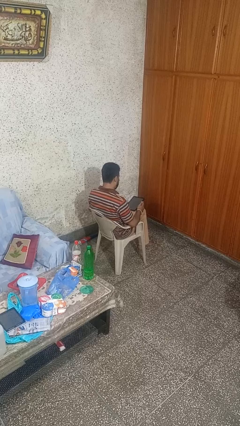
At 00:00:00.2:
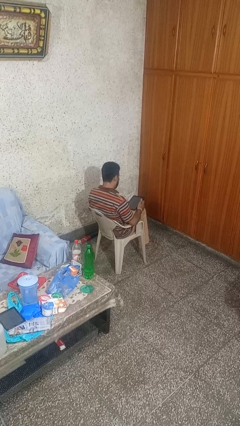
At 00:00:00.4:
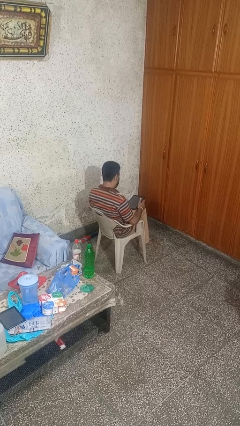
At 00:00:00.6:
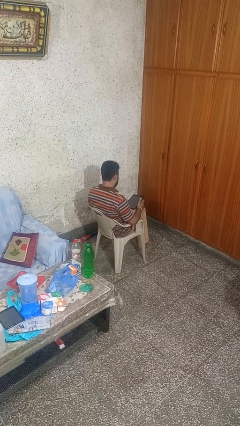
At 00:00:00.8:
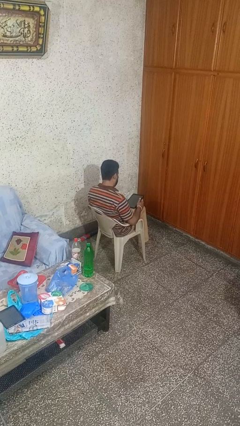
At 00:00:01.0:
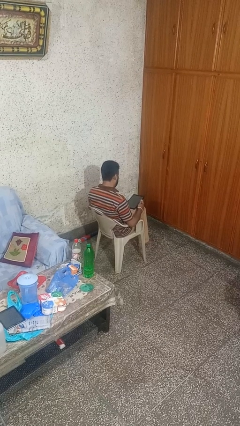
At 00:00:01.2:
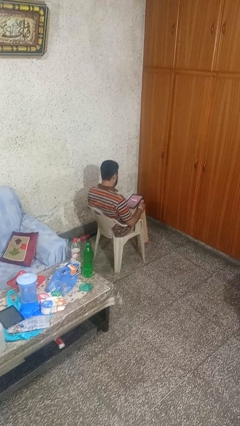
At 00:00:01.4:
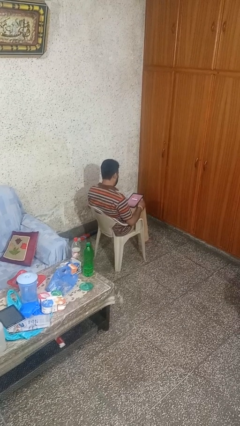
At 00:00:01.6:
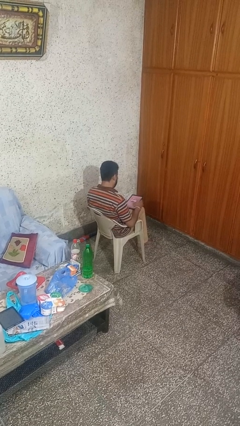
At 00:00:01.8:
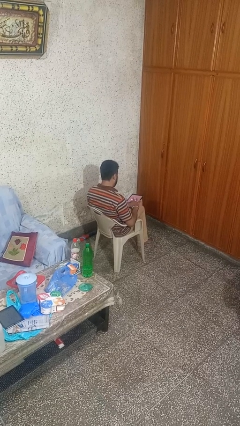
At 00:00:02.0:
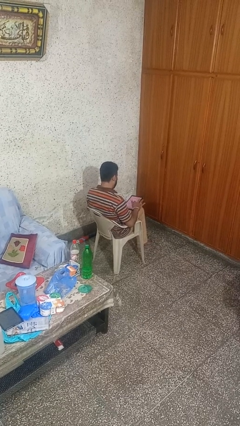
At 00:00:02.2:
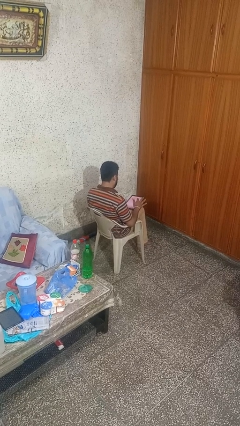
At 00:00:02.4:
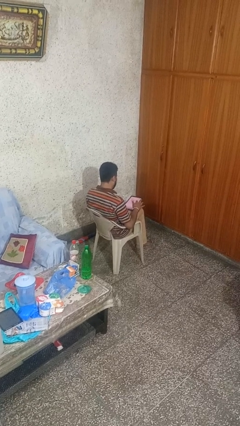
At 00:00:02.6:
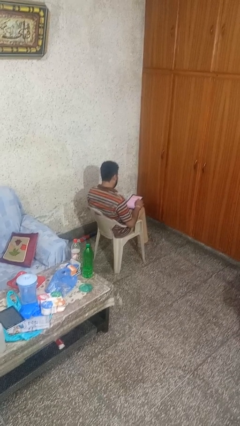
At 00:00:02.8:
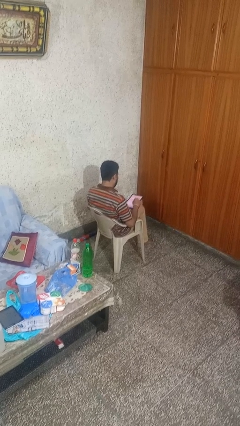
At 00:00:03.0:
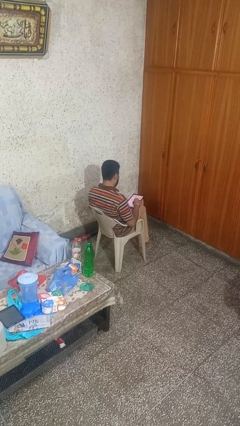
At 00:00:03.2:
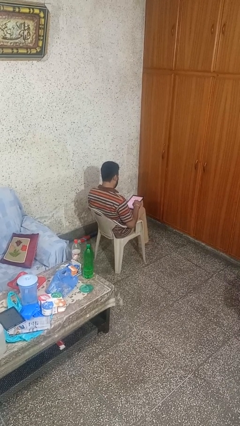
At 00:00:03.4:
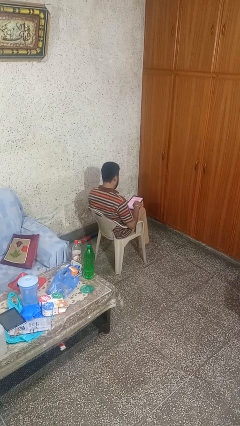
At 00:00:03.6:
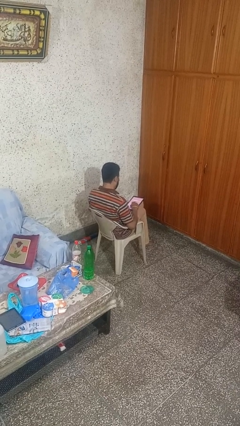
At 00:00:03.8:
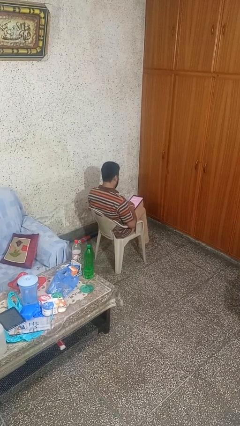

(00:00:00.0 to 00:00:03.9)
person interacts with tablet

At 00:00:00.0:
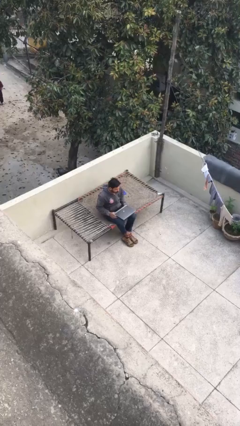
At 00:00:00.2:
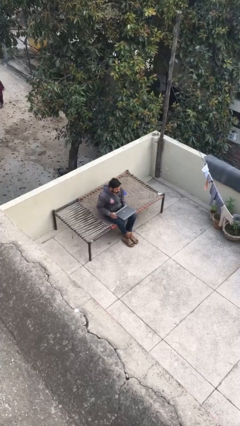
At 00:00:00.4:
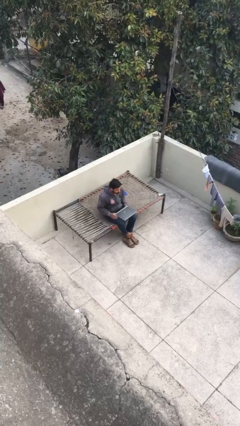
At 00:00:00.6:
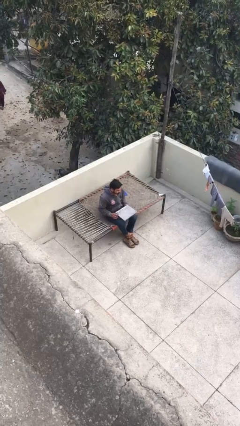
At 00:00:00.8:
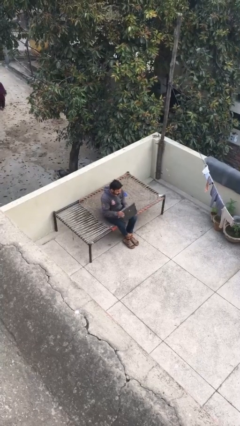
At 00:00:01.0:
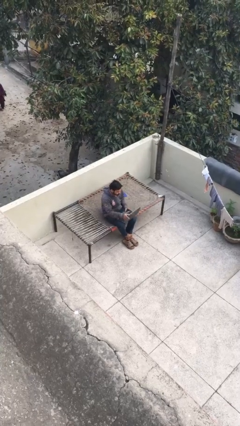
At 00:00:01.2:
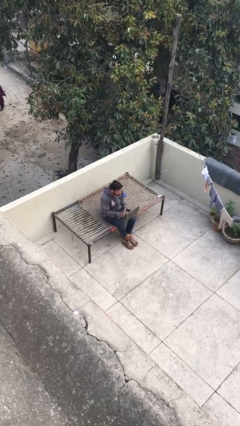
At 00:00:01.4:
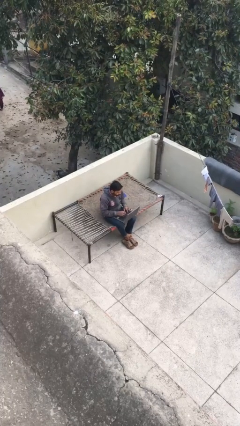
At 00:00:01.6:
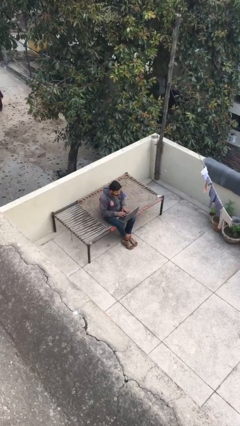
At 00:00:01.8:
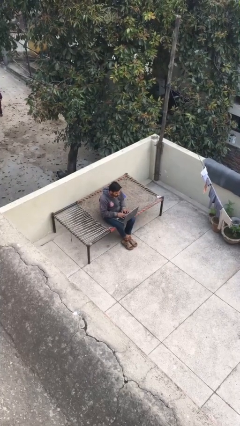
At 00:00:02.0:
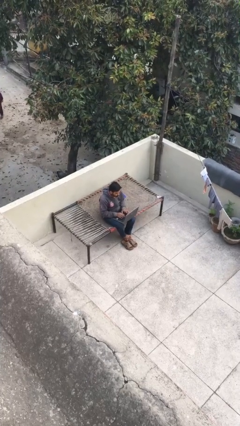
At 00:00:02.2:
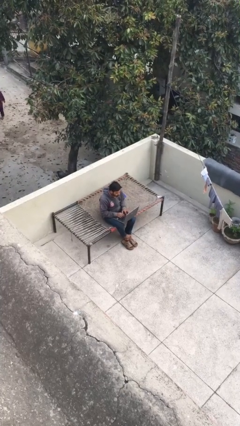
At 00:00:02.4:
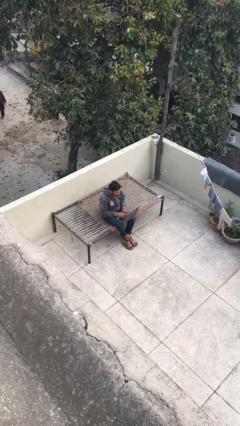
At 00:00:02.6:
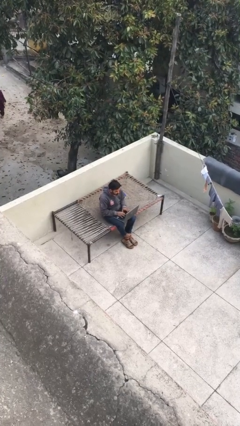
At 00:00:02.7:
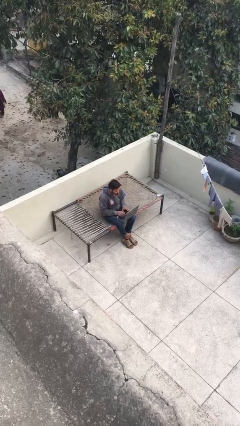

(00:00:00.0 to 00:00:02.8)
person interacts with laptop

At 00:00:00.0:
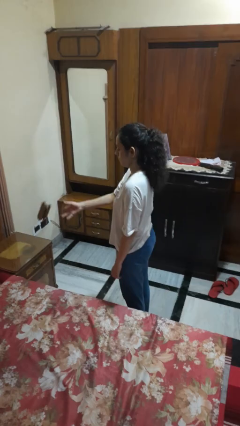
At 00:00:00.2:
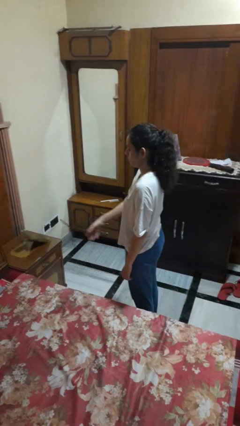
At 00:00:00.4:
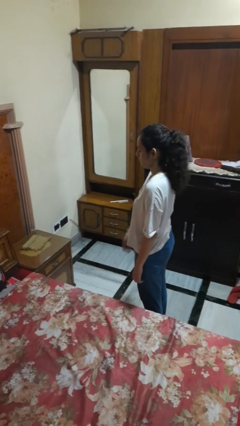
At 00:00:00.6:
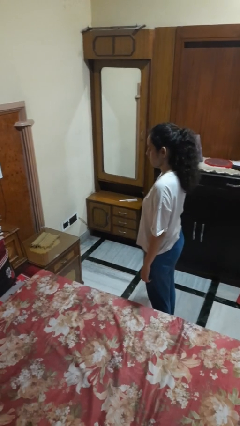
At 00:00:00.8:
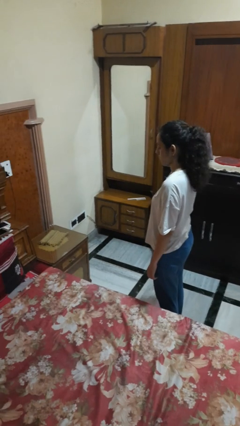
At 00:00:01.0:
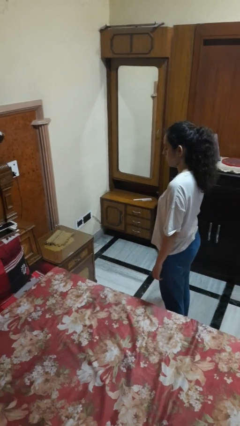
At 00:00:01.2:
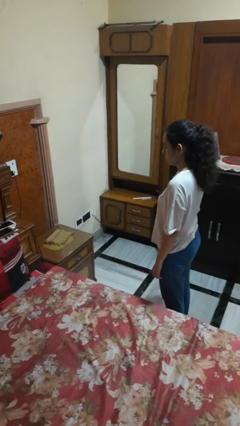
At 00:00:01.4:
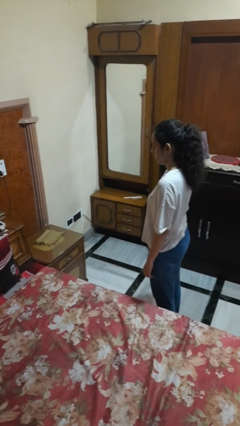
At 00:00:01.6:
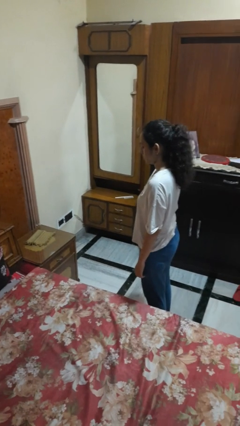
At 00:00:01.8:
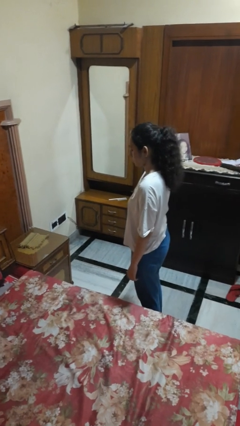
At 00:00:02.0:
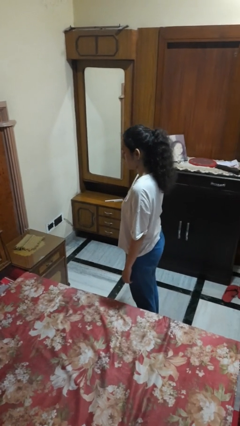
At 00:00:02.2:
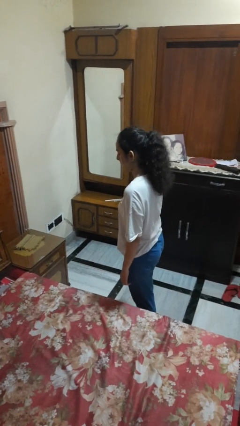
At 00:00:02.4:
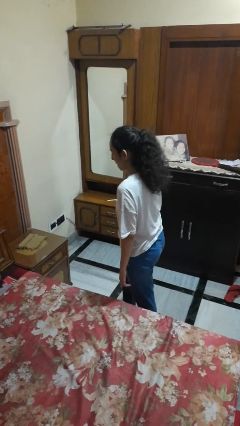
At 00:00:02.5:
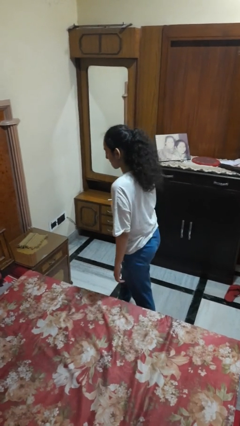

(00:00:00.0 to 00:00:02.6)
person throws object on table

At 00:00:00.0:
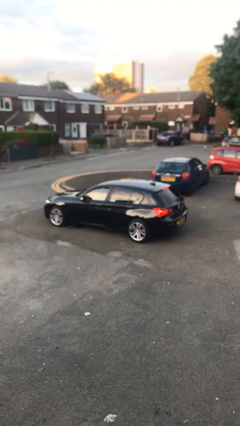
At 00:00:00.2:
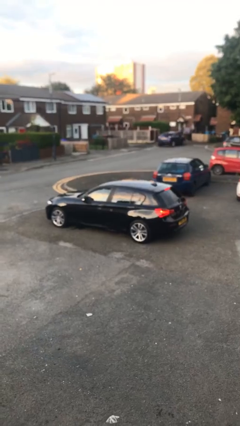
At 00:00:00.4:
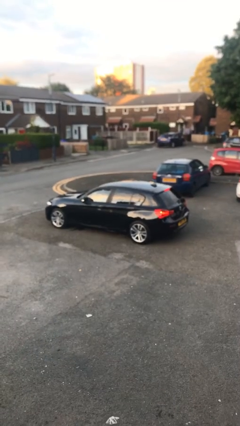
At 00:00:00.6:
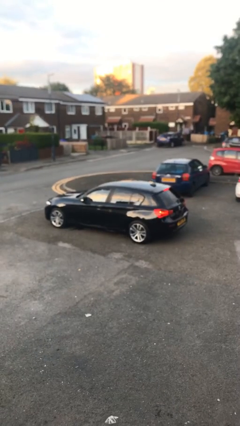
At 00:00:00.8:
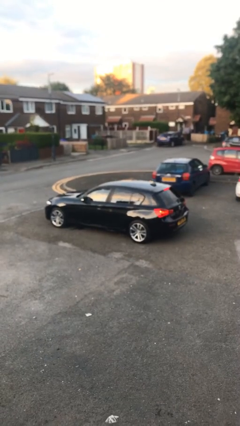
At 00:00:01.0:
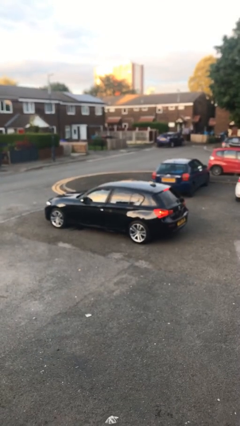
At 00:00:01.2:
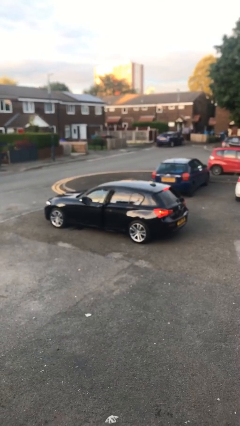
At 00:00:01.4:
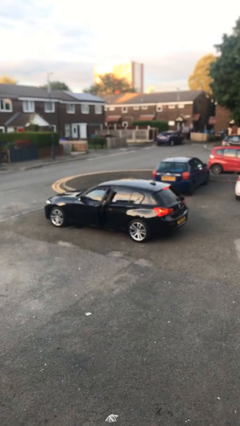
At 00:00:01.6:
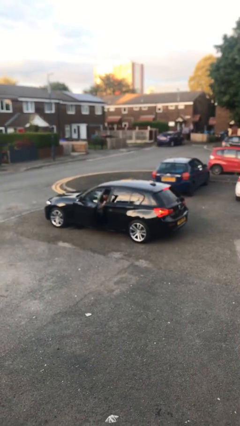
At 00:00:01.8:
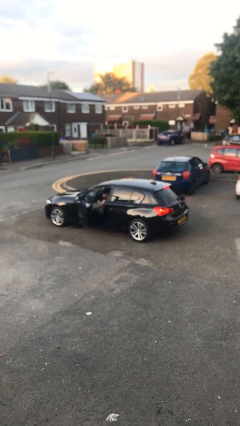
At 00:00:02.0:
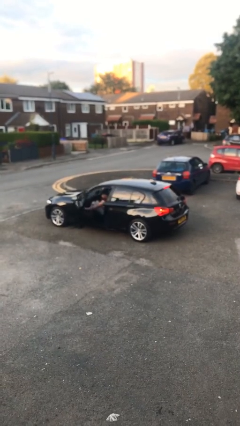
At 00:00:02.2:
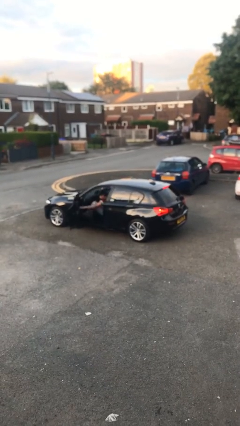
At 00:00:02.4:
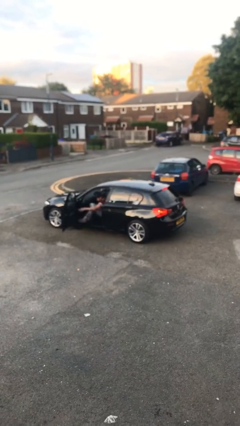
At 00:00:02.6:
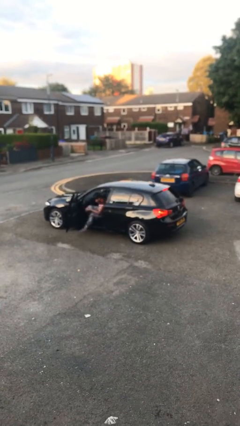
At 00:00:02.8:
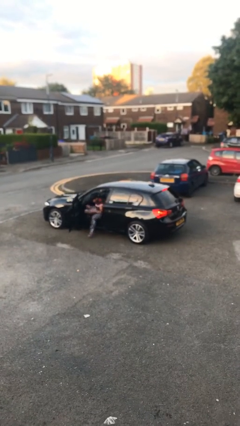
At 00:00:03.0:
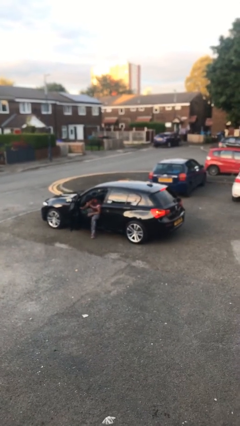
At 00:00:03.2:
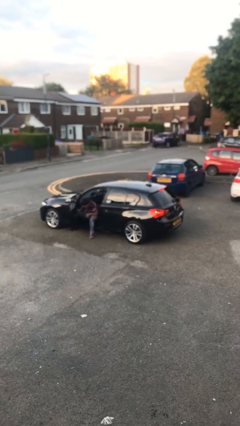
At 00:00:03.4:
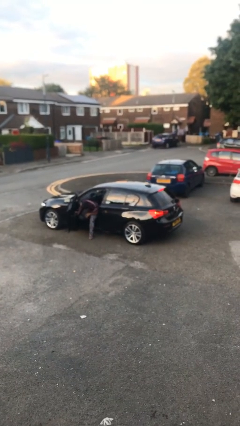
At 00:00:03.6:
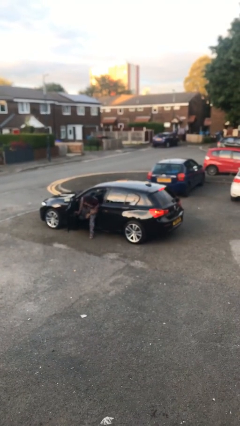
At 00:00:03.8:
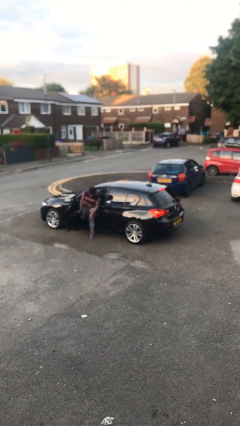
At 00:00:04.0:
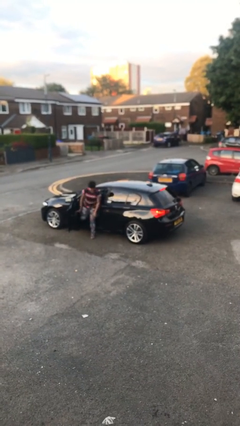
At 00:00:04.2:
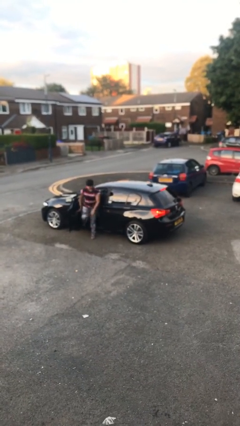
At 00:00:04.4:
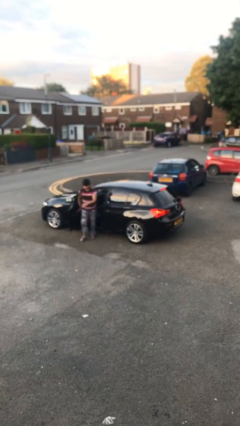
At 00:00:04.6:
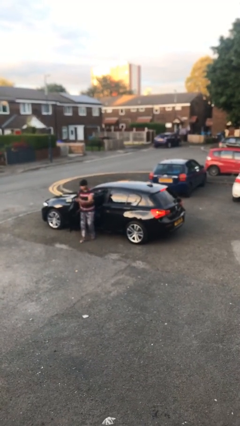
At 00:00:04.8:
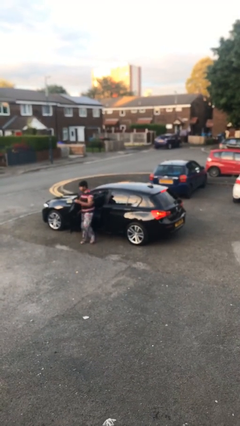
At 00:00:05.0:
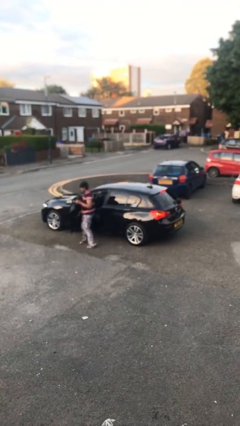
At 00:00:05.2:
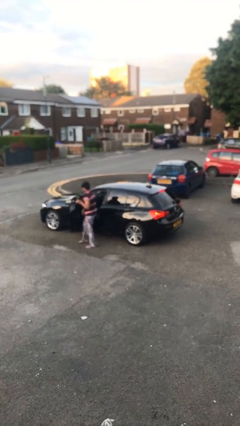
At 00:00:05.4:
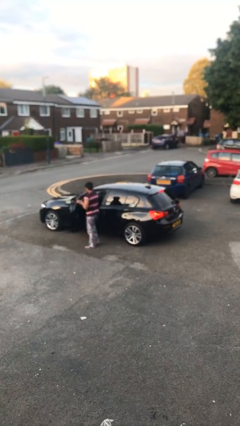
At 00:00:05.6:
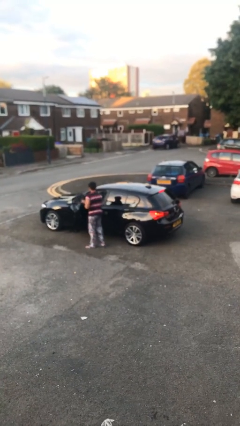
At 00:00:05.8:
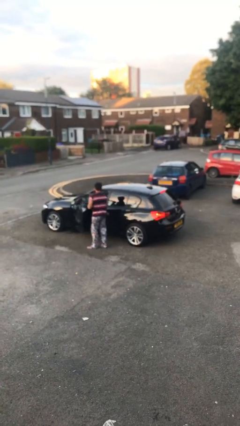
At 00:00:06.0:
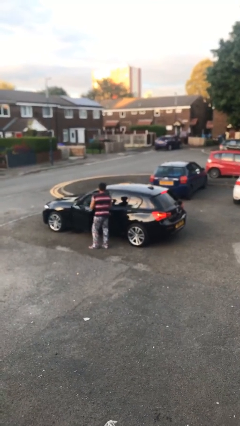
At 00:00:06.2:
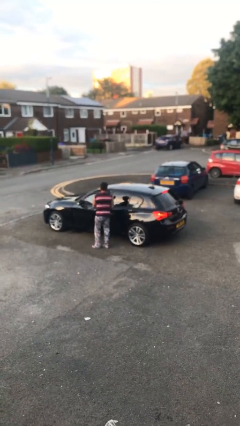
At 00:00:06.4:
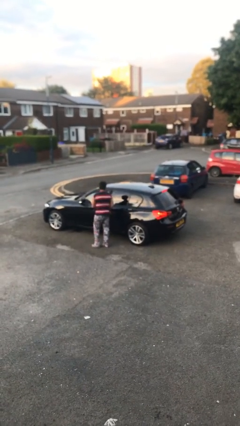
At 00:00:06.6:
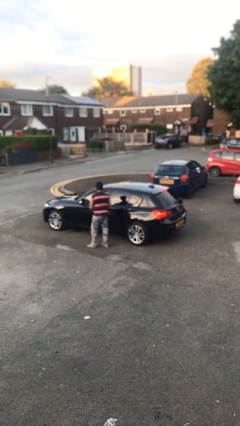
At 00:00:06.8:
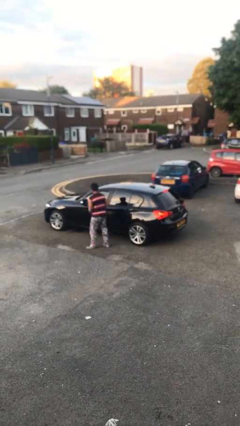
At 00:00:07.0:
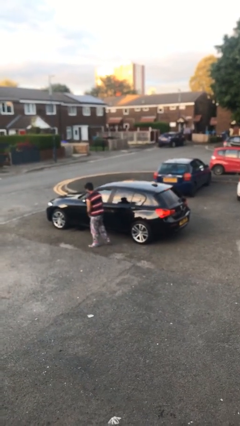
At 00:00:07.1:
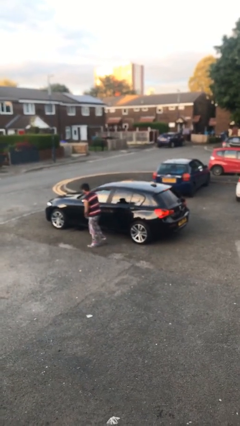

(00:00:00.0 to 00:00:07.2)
car drops off person

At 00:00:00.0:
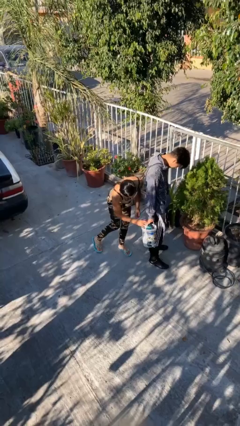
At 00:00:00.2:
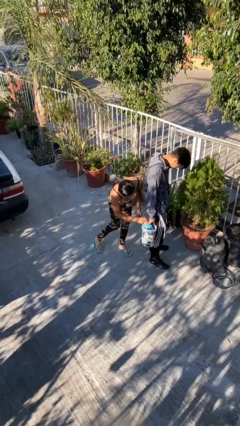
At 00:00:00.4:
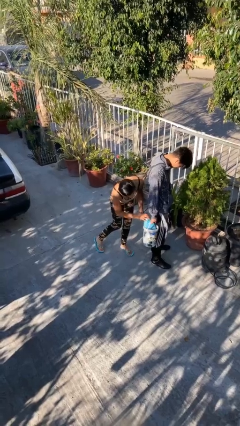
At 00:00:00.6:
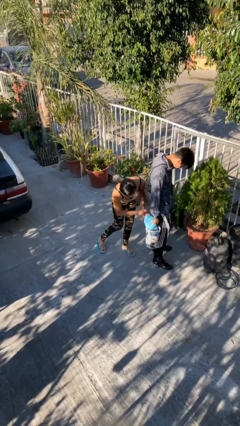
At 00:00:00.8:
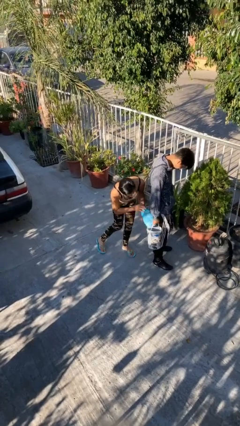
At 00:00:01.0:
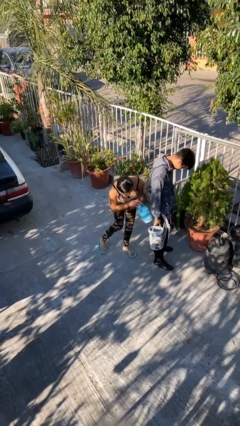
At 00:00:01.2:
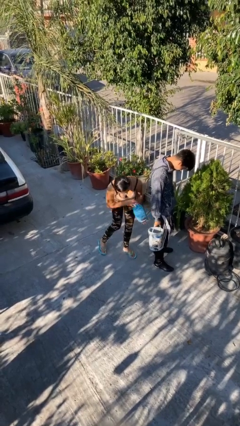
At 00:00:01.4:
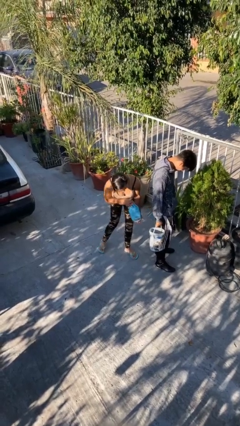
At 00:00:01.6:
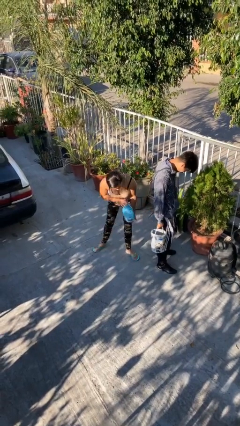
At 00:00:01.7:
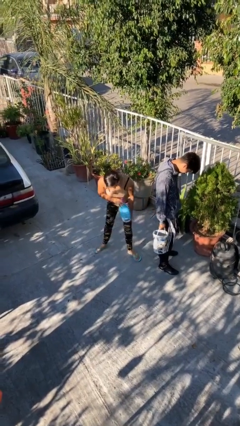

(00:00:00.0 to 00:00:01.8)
person steals object from person
